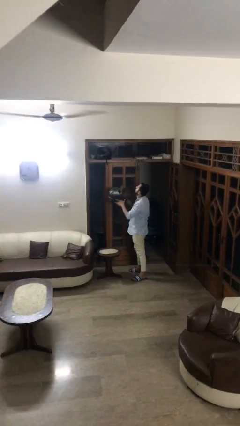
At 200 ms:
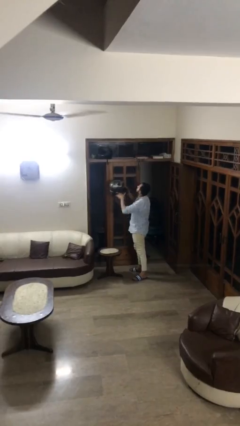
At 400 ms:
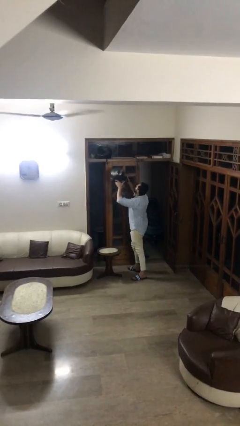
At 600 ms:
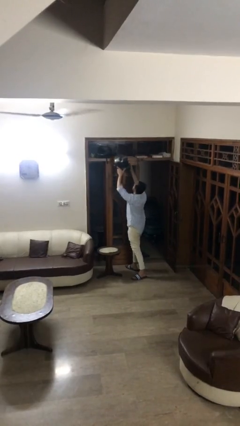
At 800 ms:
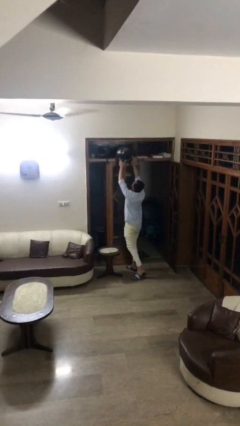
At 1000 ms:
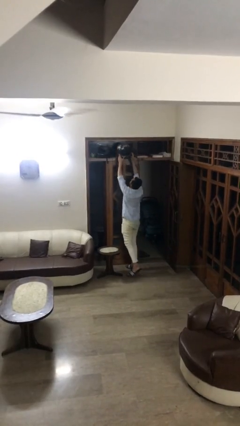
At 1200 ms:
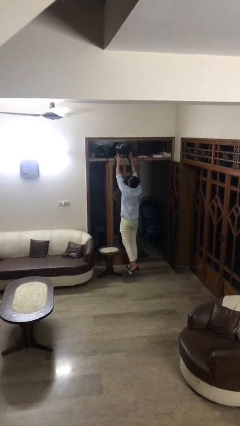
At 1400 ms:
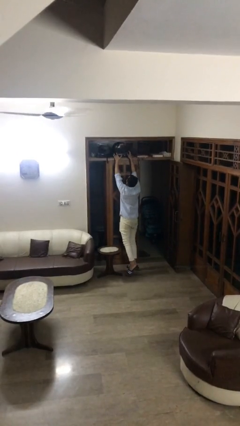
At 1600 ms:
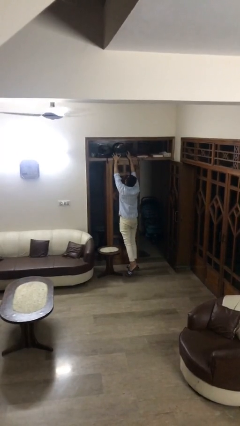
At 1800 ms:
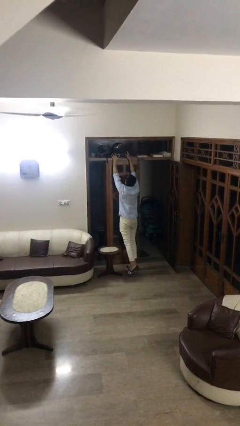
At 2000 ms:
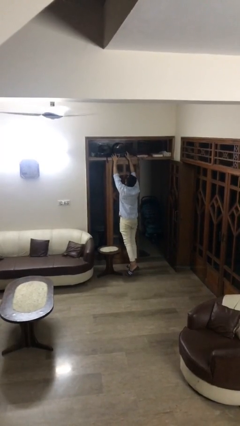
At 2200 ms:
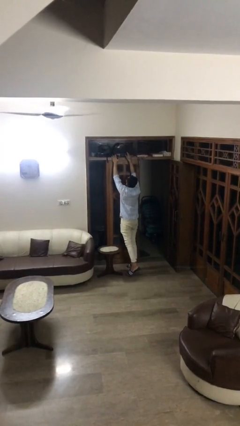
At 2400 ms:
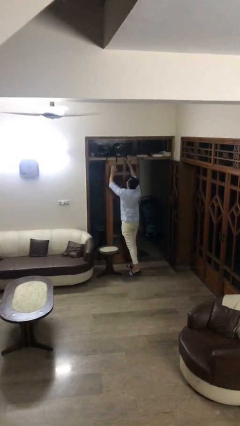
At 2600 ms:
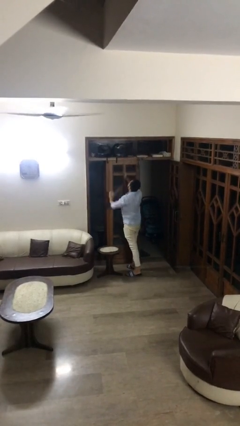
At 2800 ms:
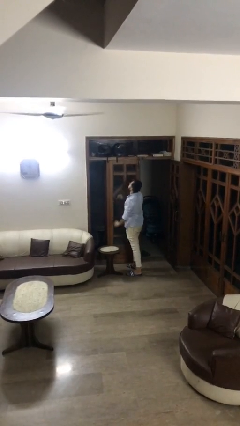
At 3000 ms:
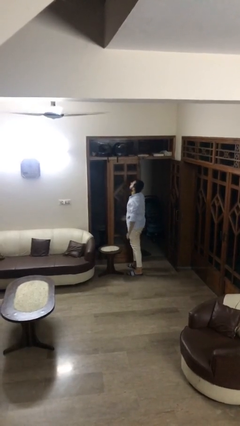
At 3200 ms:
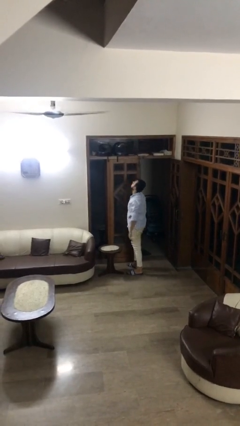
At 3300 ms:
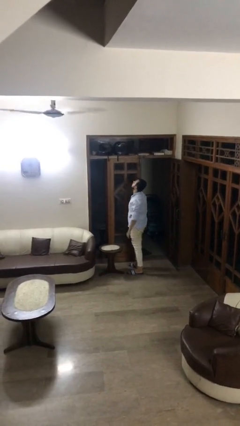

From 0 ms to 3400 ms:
person puts down object on shelf

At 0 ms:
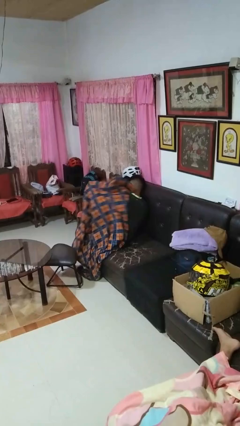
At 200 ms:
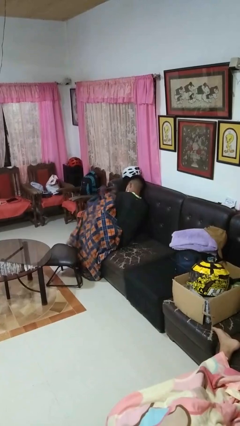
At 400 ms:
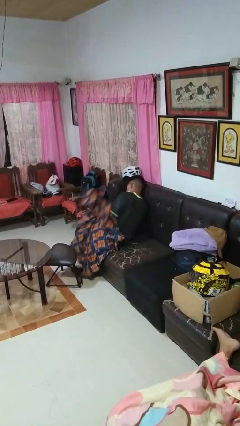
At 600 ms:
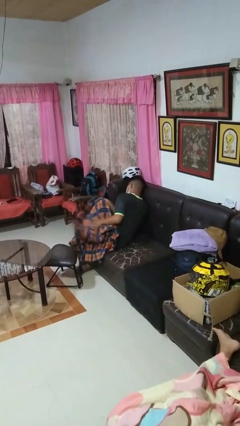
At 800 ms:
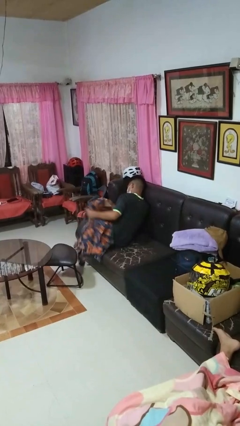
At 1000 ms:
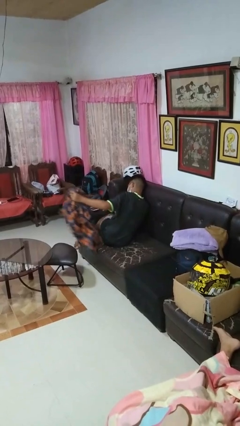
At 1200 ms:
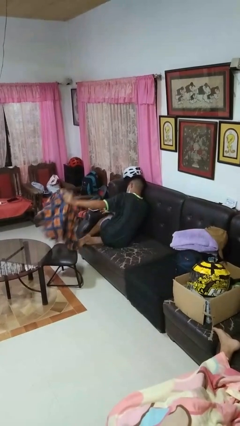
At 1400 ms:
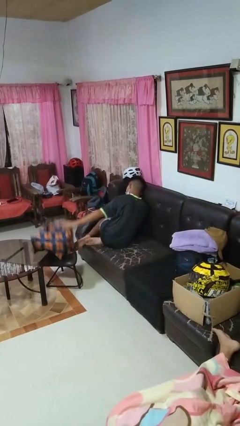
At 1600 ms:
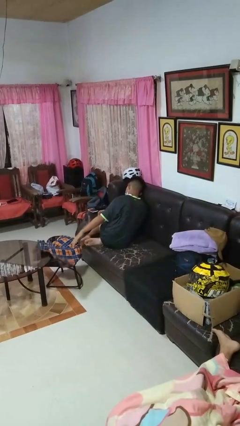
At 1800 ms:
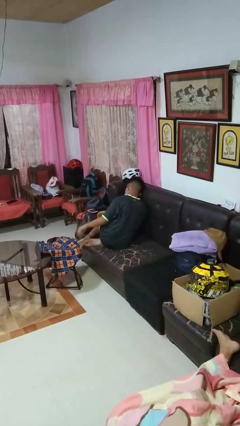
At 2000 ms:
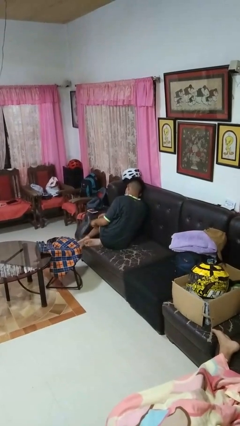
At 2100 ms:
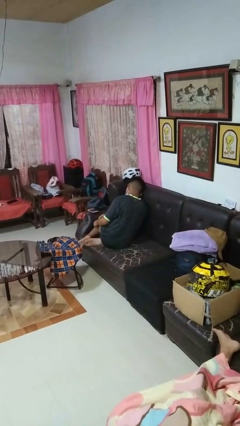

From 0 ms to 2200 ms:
person uncovers with blanket

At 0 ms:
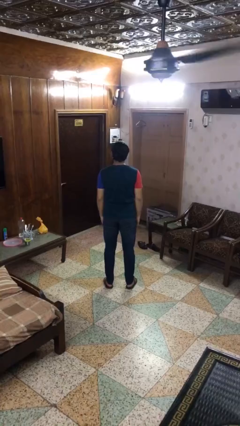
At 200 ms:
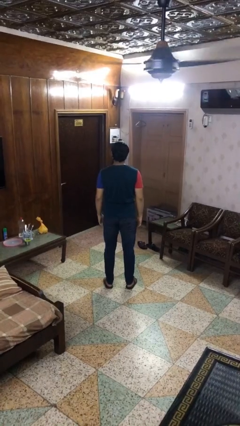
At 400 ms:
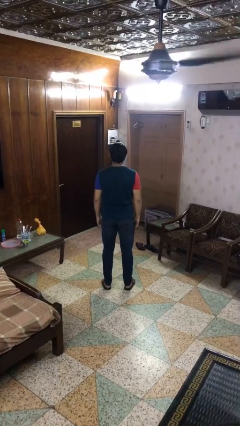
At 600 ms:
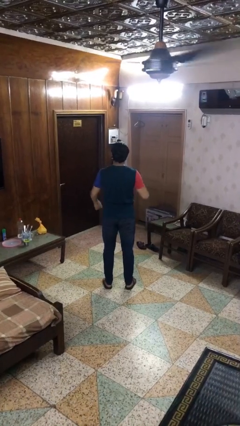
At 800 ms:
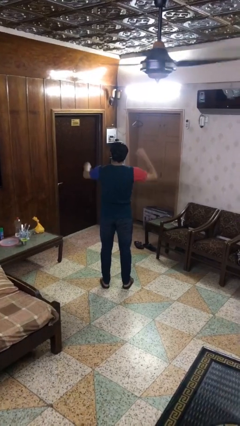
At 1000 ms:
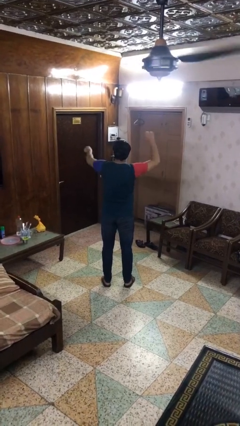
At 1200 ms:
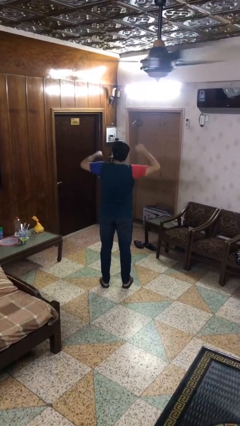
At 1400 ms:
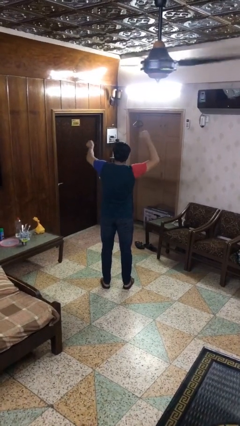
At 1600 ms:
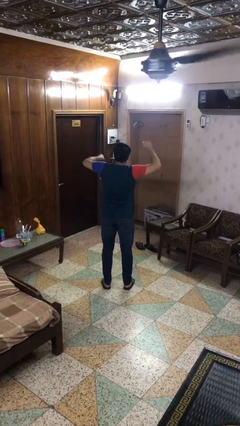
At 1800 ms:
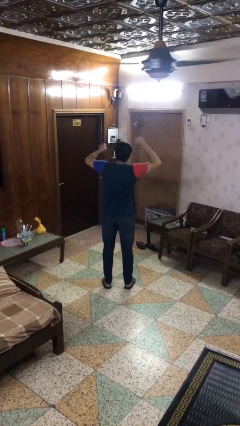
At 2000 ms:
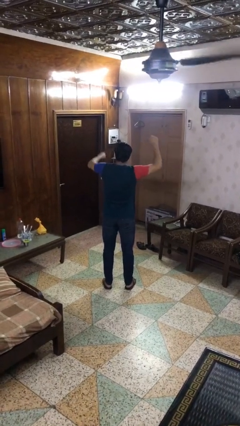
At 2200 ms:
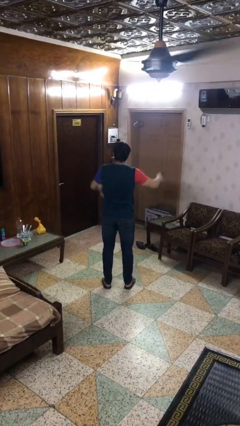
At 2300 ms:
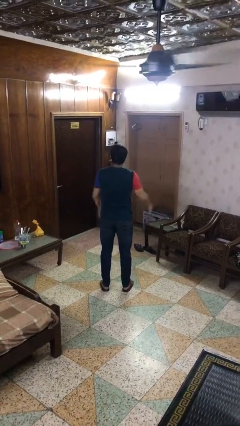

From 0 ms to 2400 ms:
person dances in place

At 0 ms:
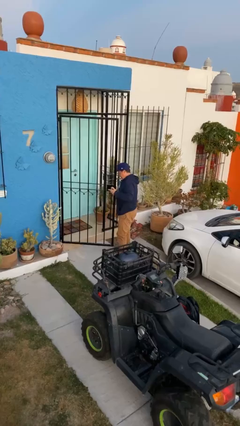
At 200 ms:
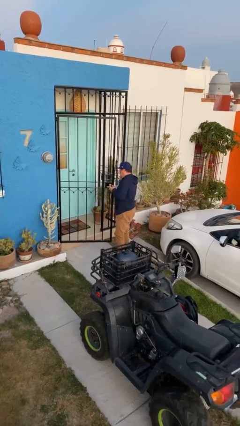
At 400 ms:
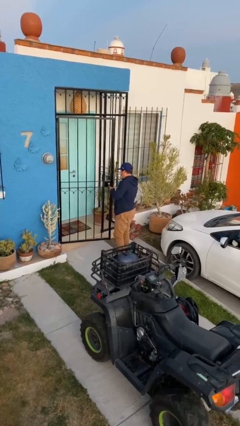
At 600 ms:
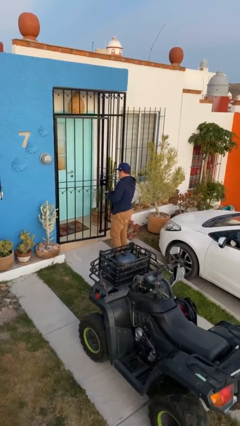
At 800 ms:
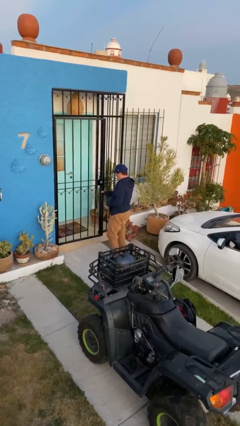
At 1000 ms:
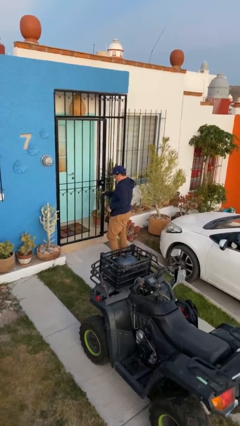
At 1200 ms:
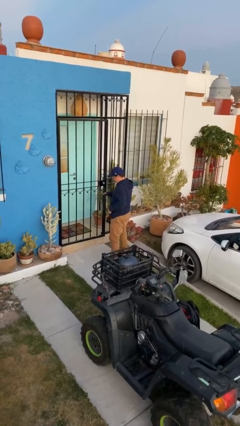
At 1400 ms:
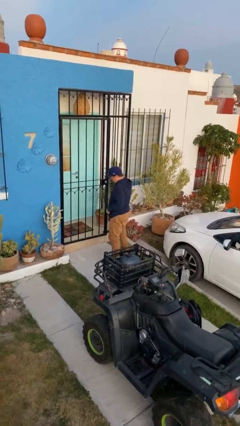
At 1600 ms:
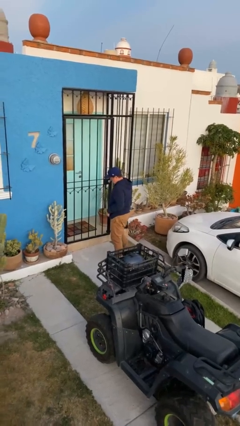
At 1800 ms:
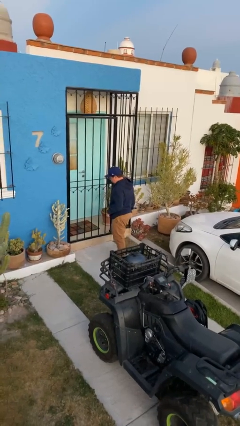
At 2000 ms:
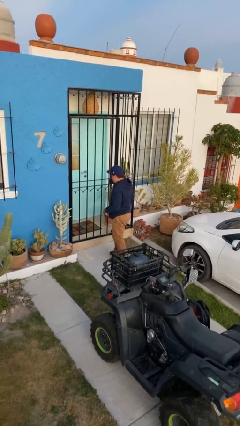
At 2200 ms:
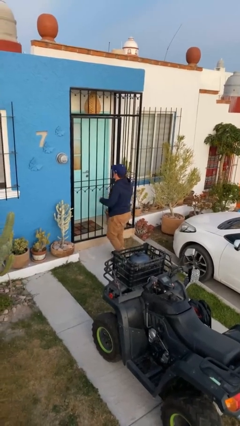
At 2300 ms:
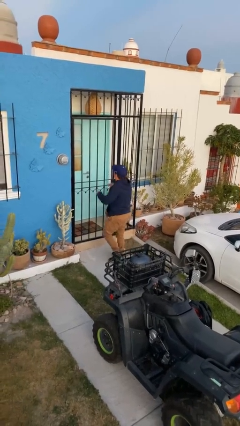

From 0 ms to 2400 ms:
person closes facility door

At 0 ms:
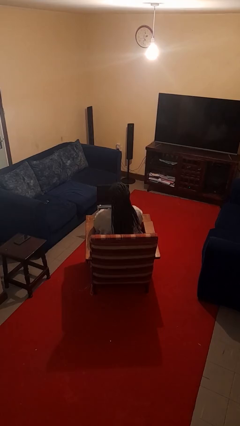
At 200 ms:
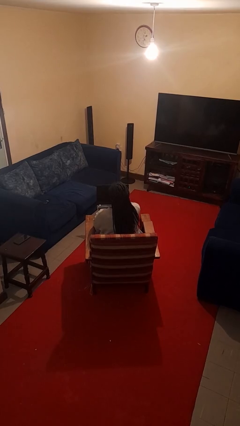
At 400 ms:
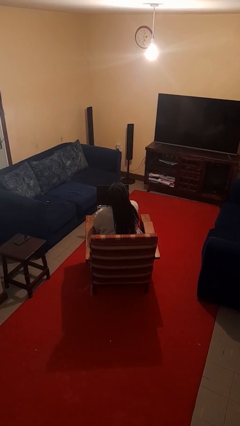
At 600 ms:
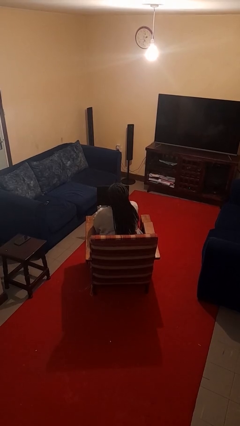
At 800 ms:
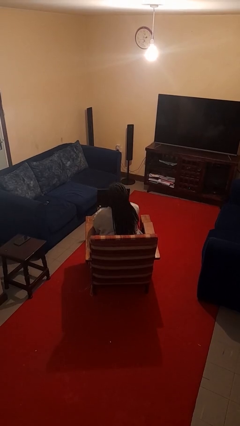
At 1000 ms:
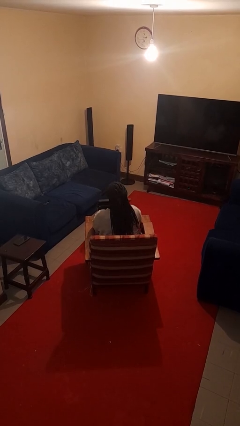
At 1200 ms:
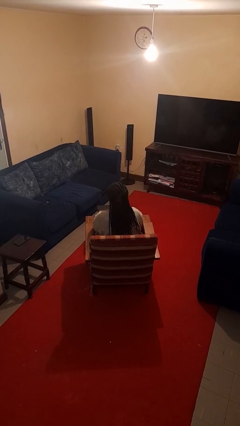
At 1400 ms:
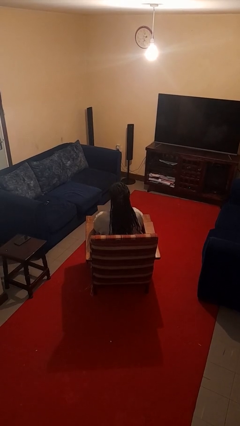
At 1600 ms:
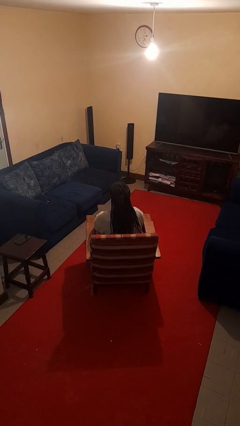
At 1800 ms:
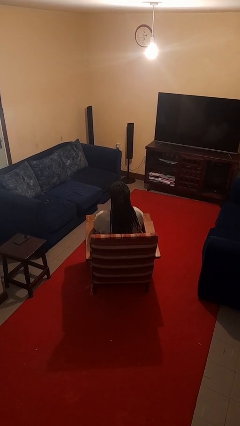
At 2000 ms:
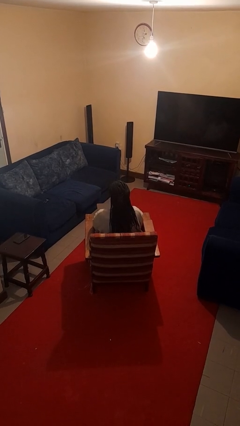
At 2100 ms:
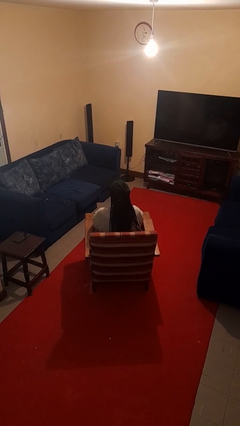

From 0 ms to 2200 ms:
person closes laptop

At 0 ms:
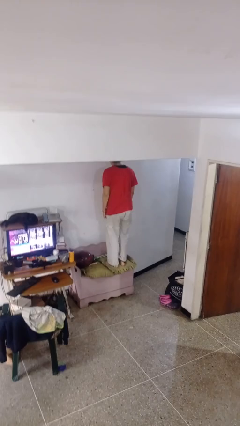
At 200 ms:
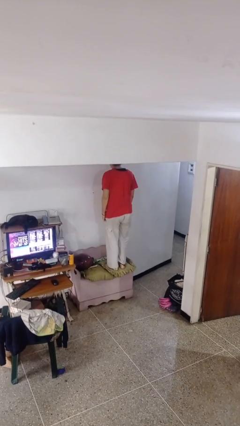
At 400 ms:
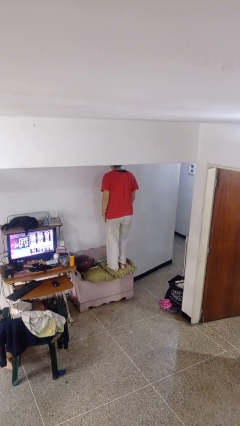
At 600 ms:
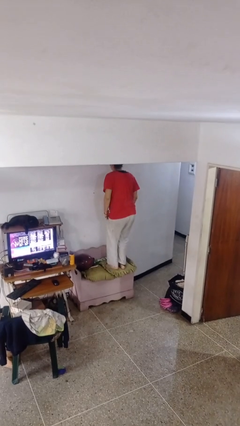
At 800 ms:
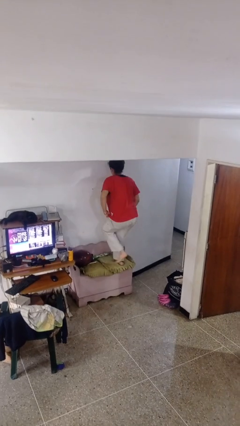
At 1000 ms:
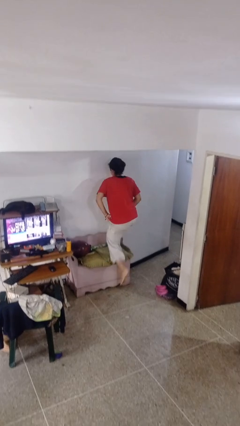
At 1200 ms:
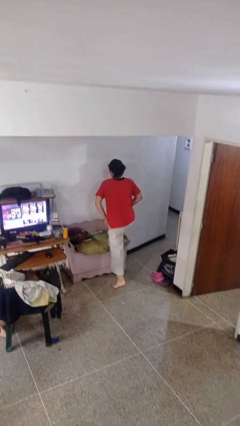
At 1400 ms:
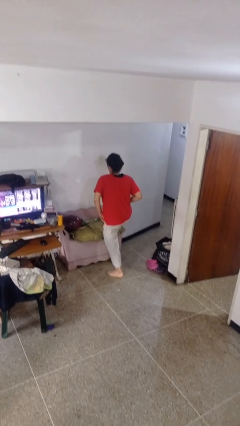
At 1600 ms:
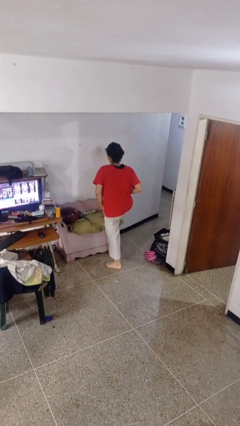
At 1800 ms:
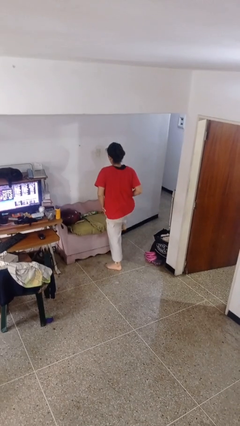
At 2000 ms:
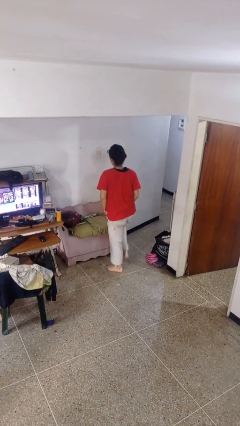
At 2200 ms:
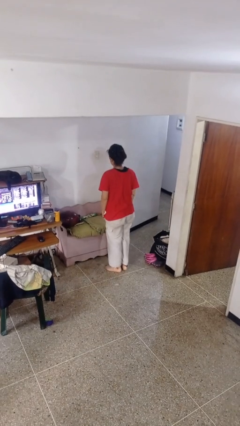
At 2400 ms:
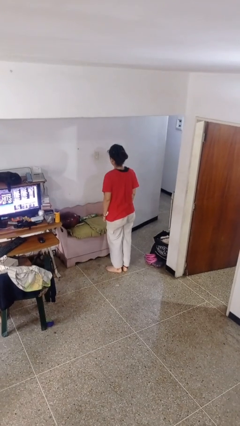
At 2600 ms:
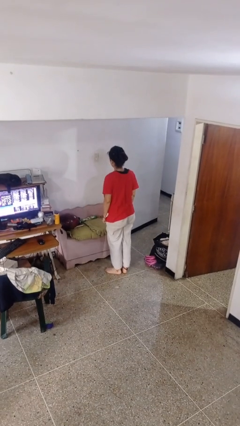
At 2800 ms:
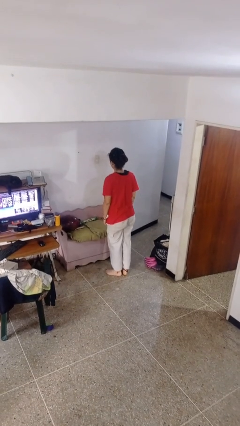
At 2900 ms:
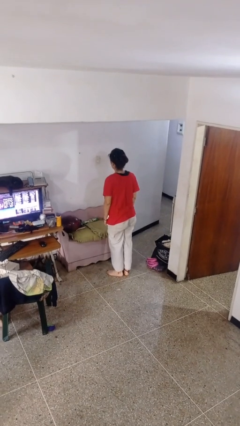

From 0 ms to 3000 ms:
person climbs off couch

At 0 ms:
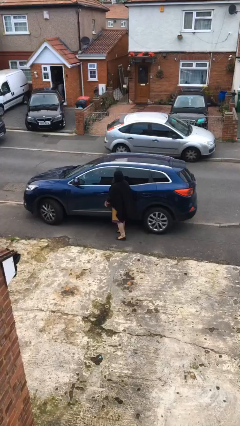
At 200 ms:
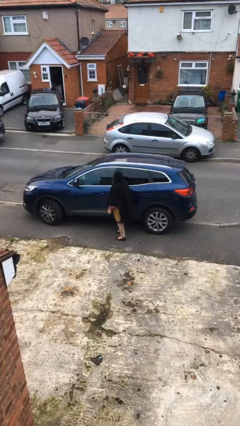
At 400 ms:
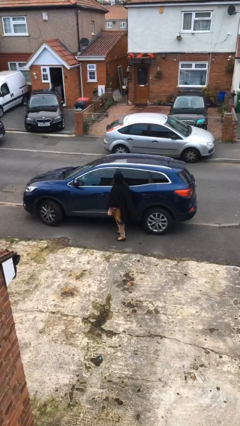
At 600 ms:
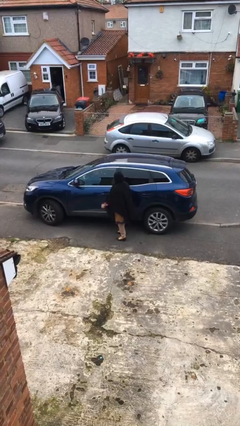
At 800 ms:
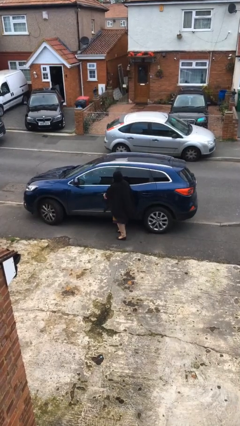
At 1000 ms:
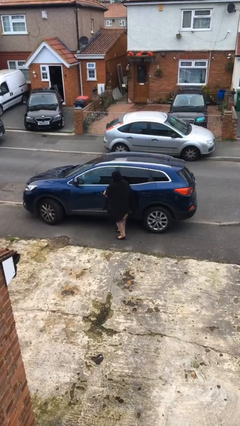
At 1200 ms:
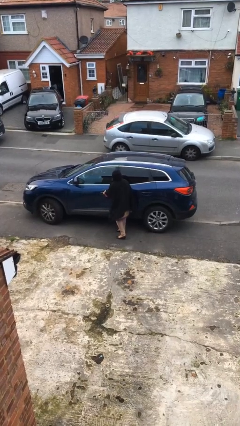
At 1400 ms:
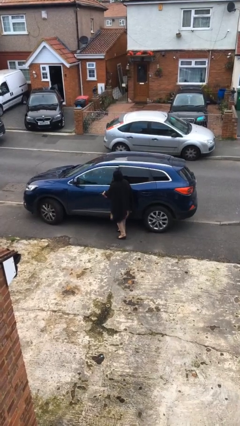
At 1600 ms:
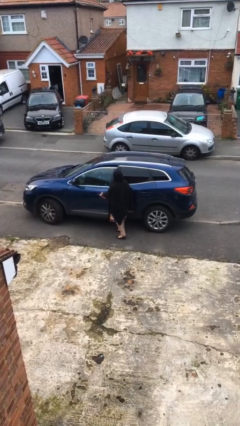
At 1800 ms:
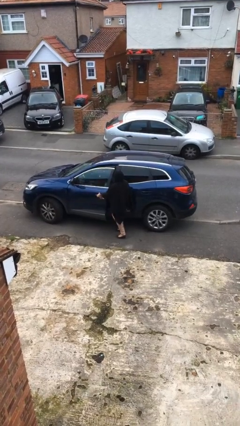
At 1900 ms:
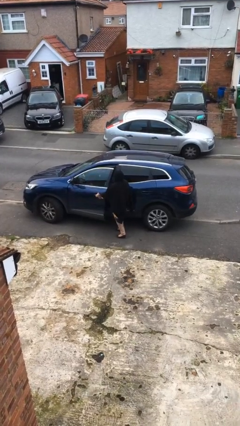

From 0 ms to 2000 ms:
person opens car door
